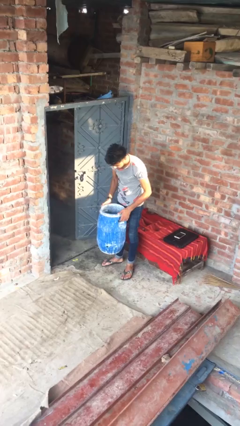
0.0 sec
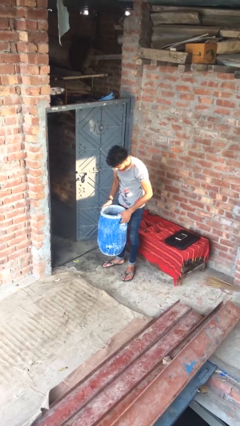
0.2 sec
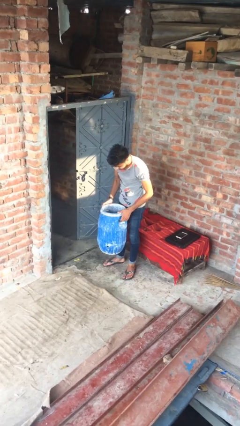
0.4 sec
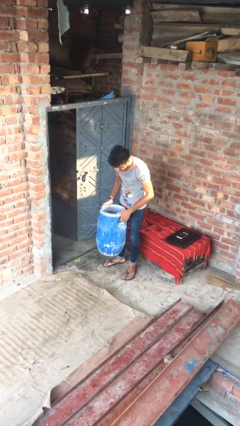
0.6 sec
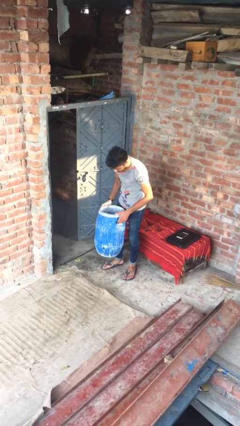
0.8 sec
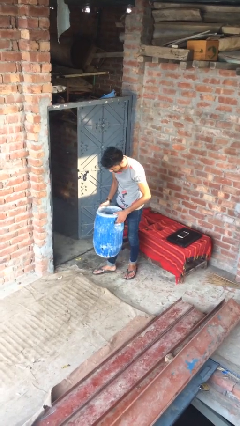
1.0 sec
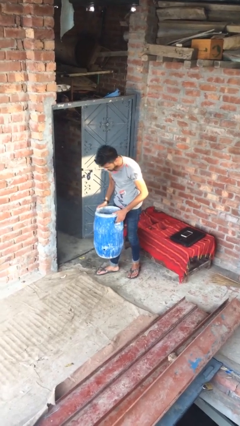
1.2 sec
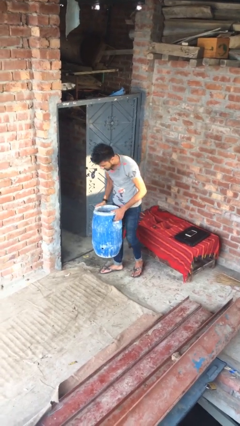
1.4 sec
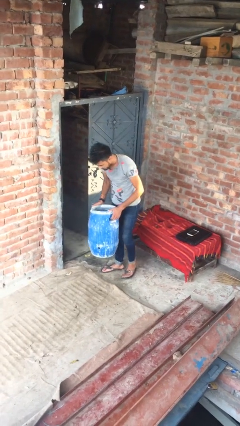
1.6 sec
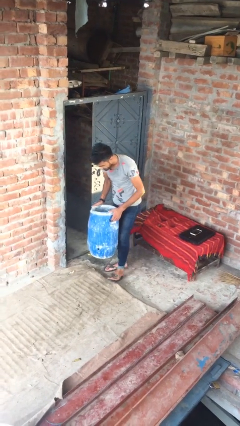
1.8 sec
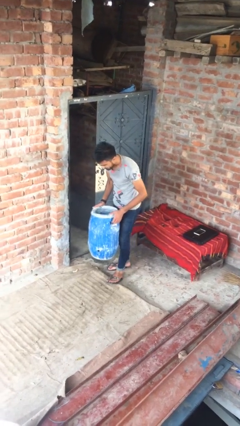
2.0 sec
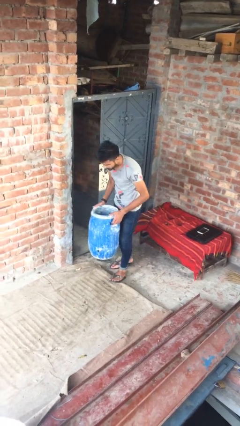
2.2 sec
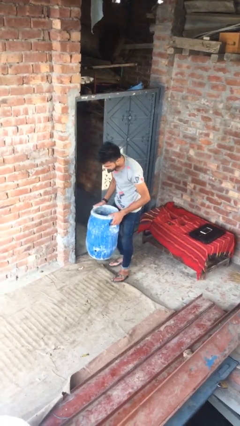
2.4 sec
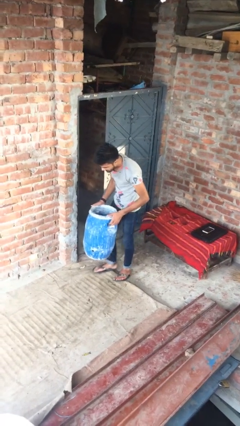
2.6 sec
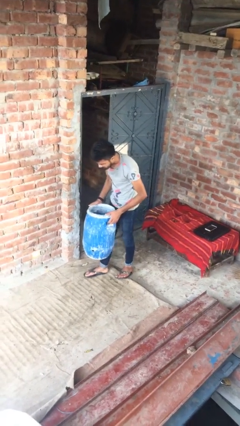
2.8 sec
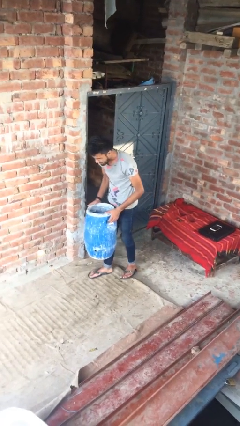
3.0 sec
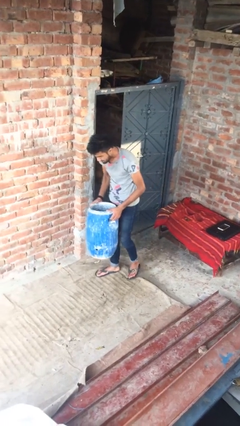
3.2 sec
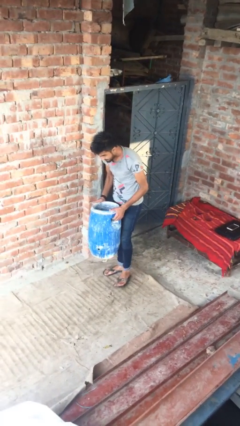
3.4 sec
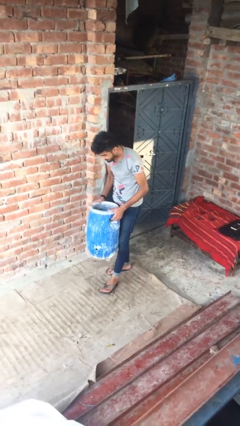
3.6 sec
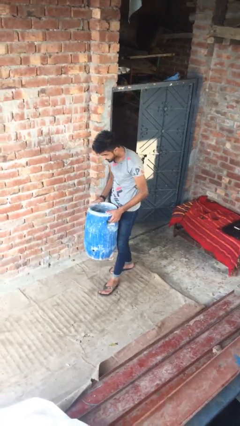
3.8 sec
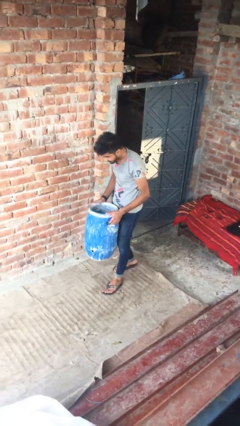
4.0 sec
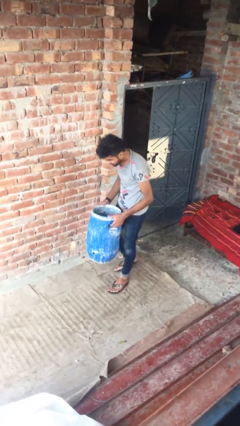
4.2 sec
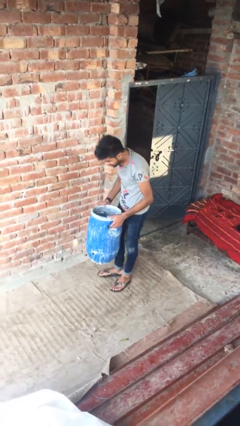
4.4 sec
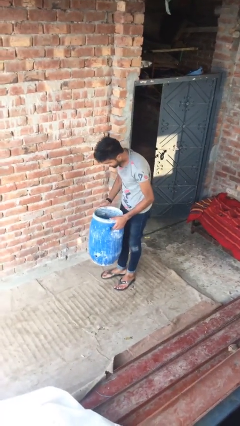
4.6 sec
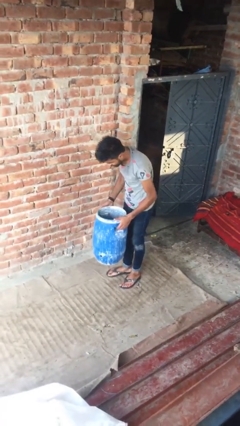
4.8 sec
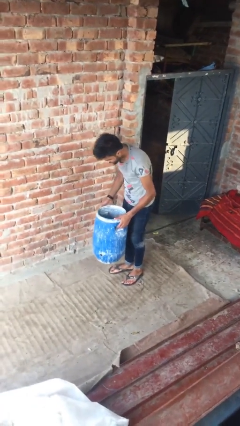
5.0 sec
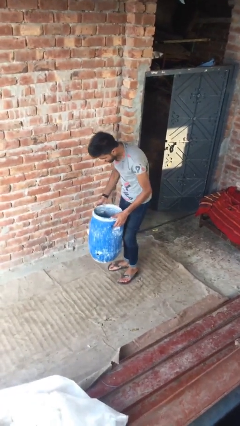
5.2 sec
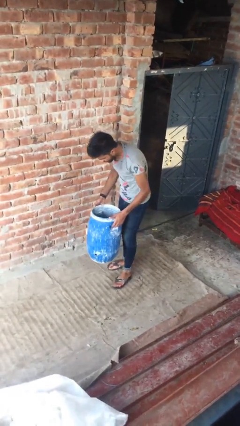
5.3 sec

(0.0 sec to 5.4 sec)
person carries heavy object

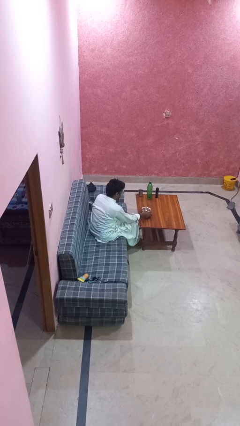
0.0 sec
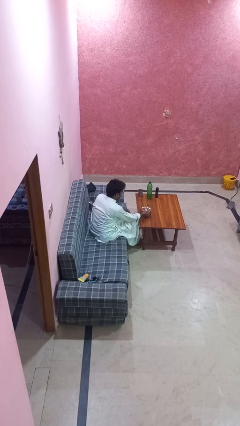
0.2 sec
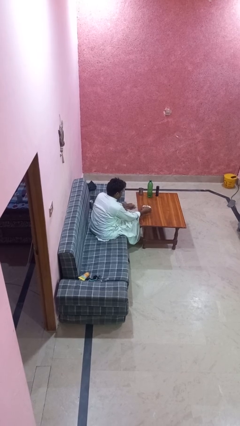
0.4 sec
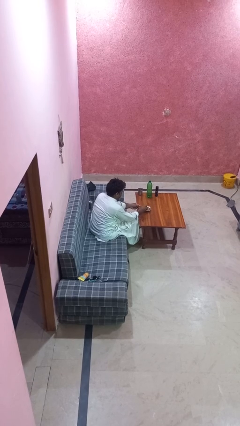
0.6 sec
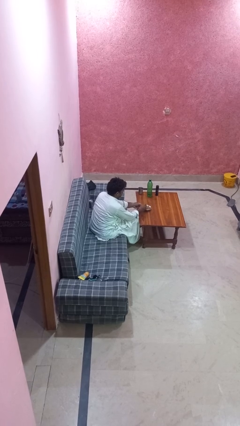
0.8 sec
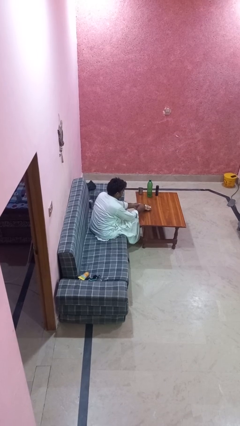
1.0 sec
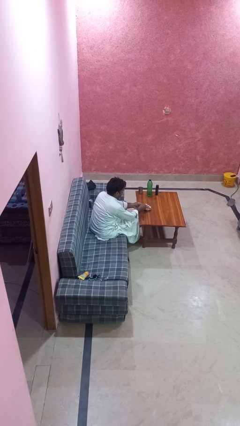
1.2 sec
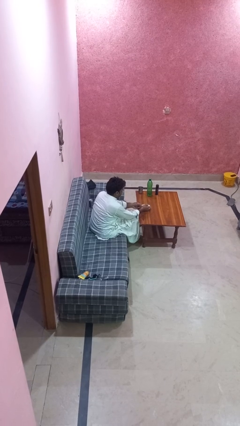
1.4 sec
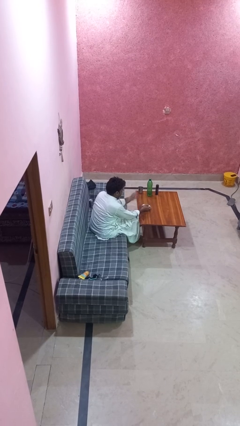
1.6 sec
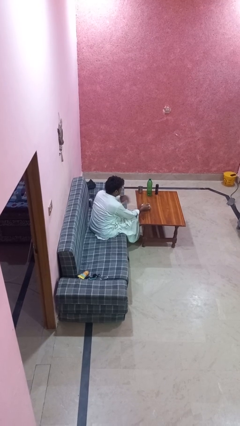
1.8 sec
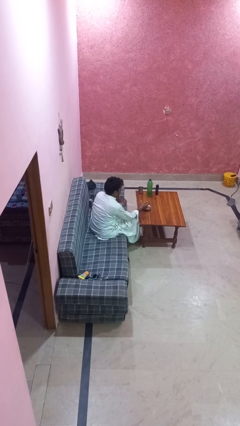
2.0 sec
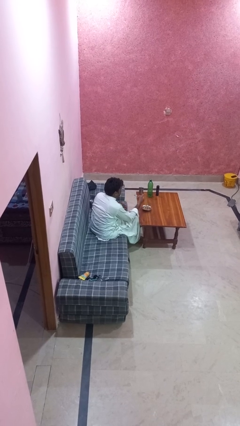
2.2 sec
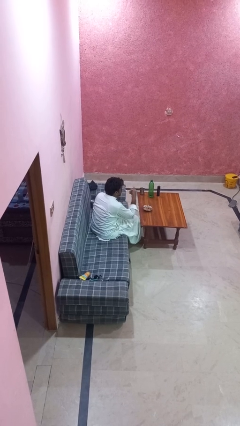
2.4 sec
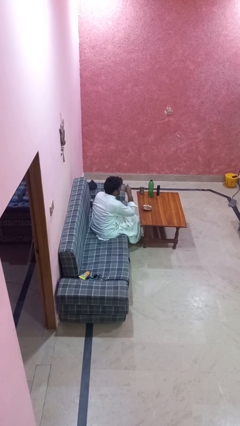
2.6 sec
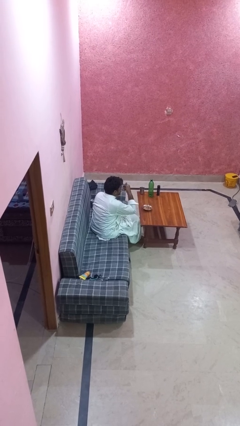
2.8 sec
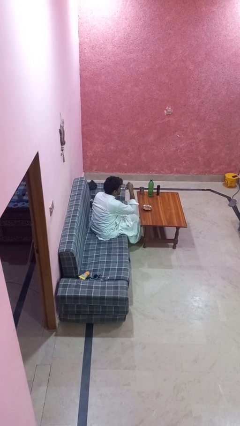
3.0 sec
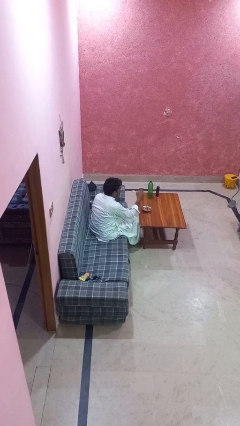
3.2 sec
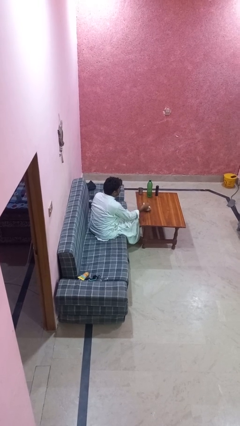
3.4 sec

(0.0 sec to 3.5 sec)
person eats with utensil

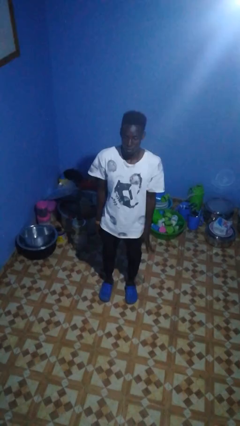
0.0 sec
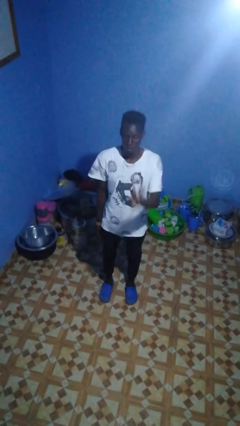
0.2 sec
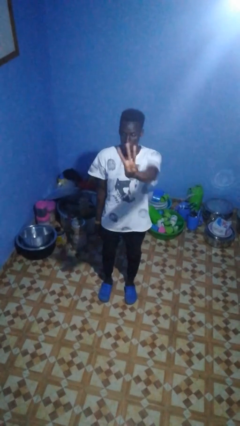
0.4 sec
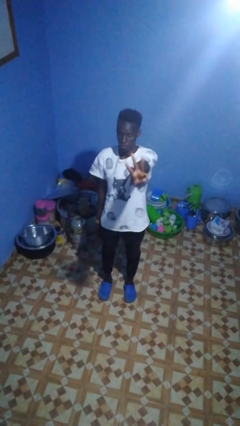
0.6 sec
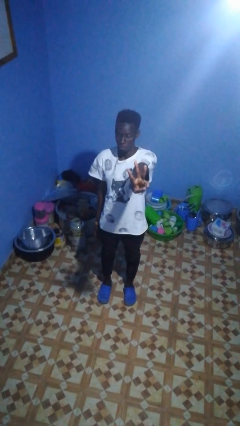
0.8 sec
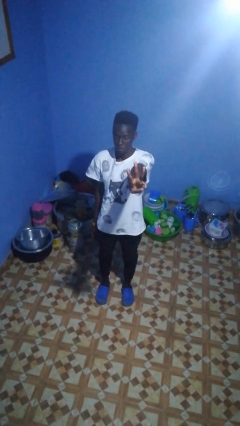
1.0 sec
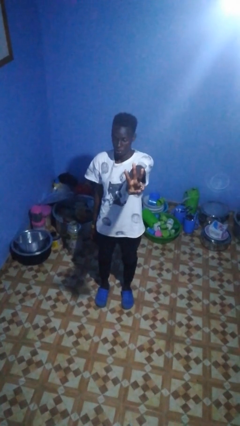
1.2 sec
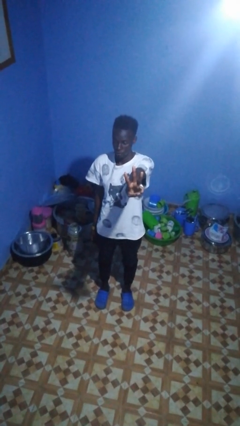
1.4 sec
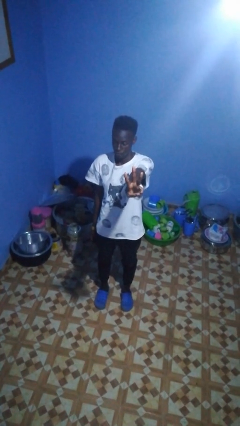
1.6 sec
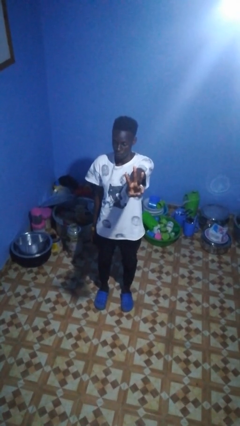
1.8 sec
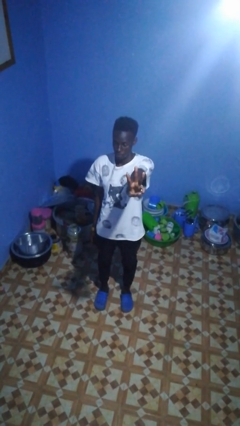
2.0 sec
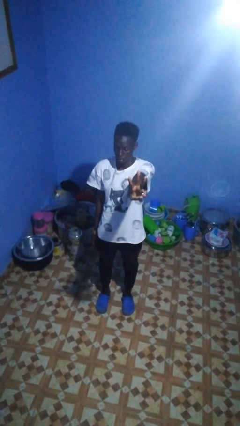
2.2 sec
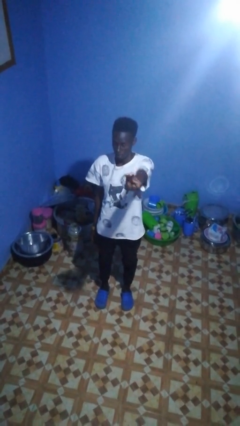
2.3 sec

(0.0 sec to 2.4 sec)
person gestures number three

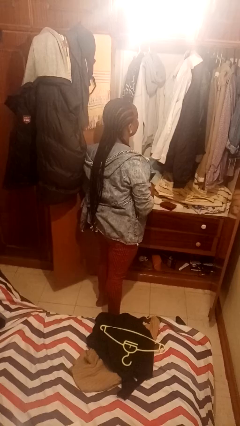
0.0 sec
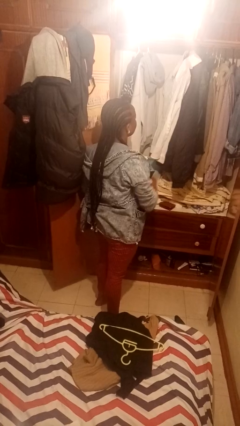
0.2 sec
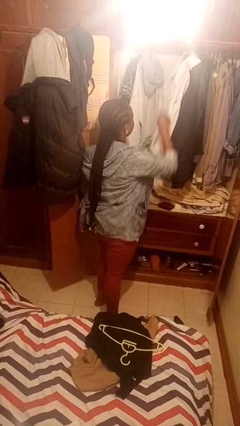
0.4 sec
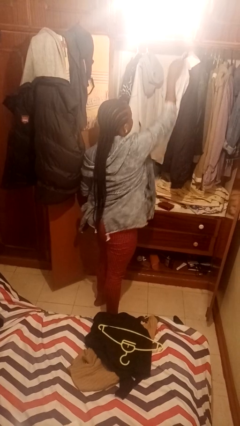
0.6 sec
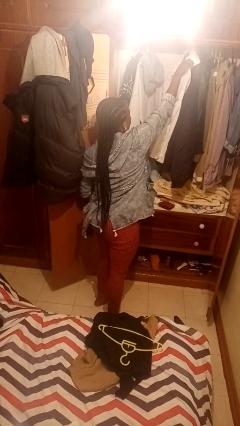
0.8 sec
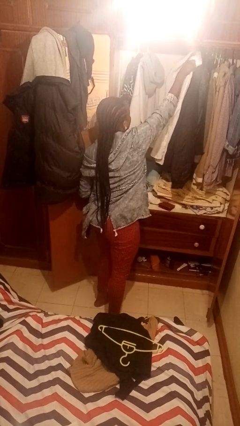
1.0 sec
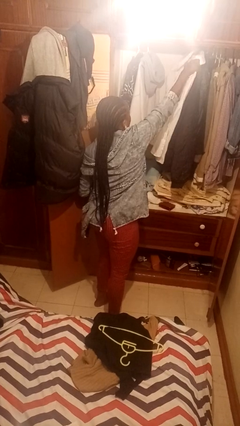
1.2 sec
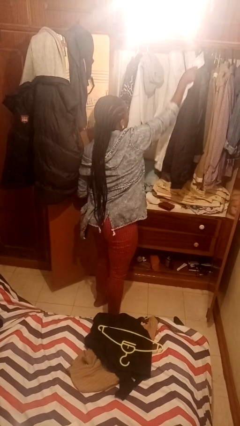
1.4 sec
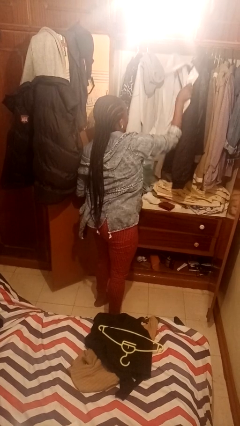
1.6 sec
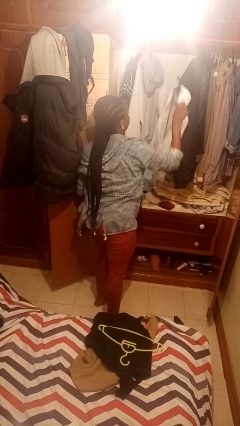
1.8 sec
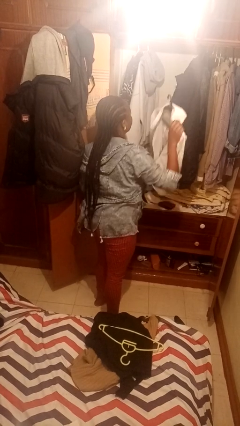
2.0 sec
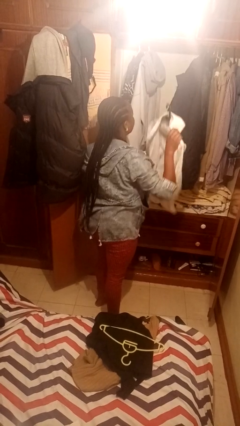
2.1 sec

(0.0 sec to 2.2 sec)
person takes clothes from closet

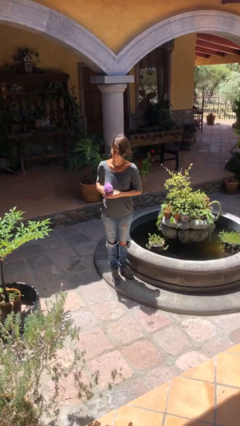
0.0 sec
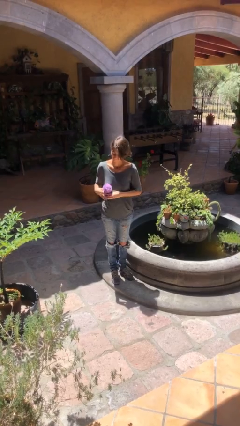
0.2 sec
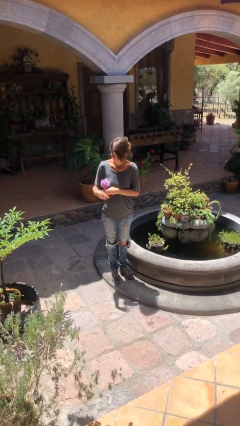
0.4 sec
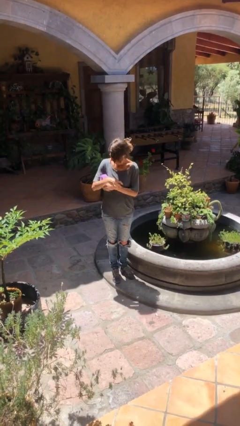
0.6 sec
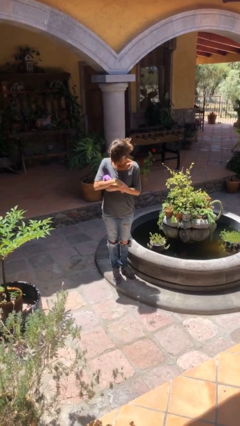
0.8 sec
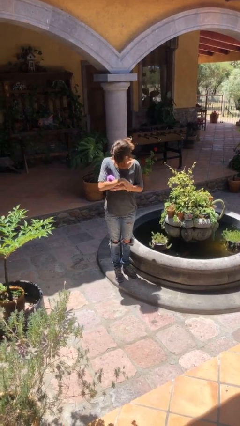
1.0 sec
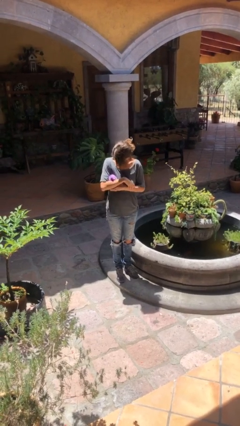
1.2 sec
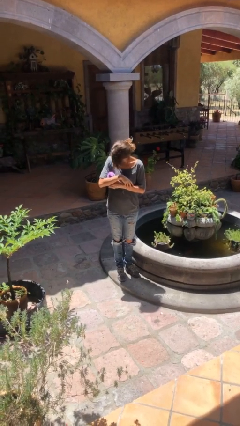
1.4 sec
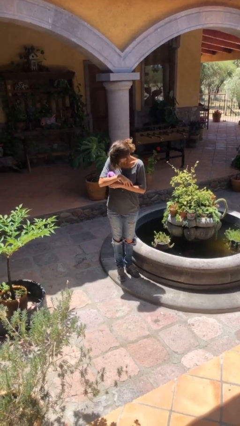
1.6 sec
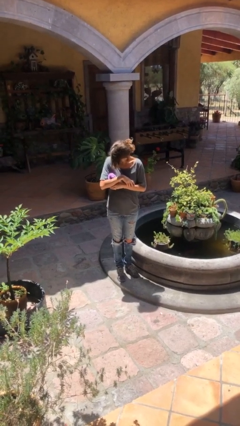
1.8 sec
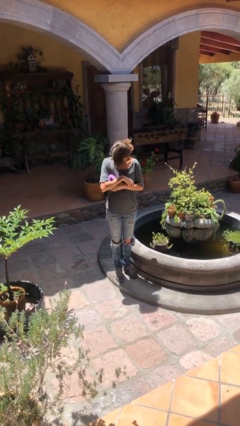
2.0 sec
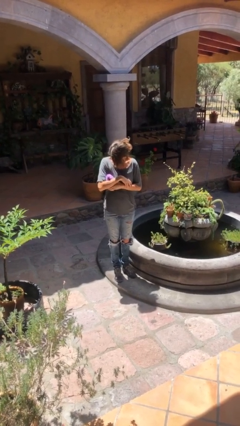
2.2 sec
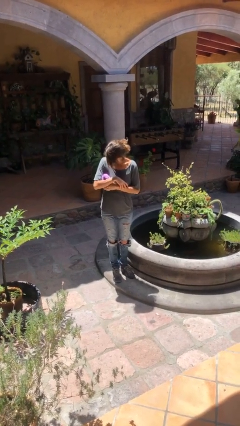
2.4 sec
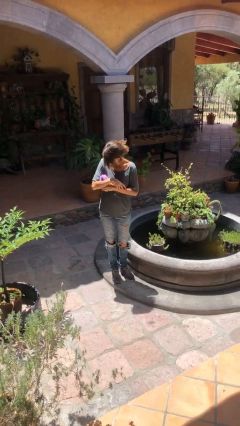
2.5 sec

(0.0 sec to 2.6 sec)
person hugs stuffed animal

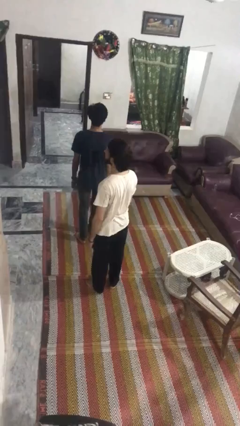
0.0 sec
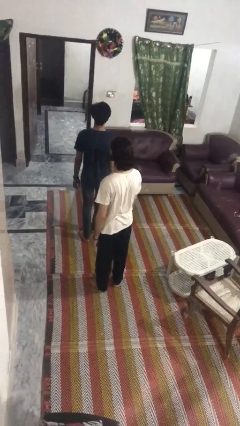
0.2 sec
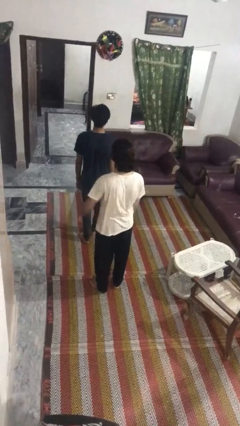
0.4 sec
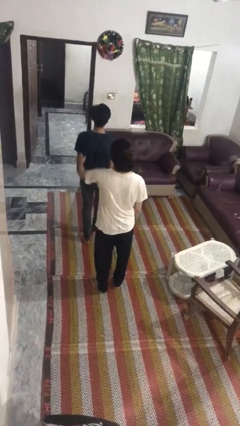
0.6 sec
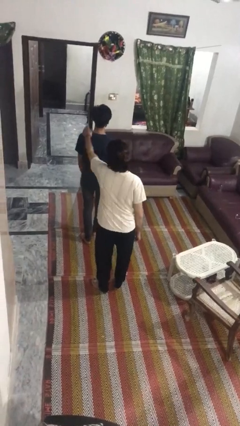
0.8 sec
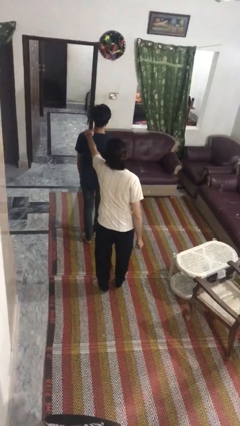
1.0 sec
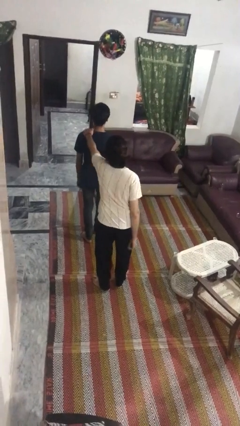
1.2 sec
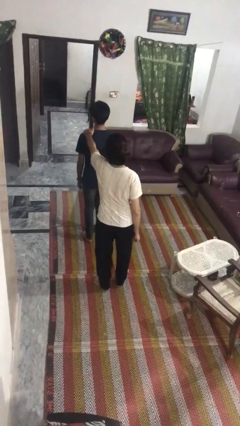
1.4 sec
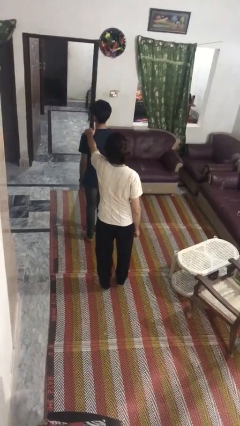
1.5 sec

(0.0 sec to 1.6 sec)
person grabs person by shoulder
